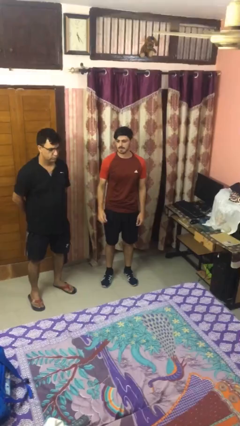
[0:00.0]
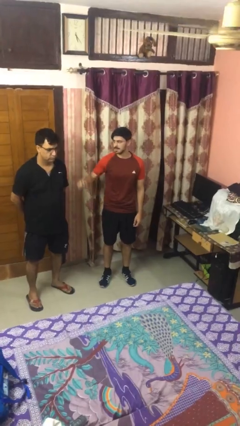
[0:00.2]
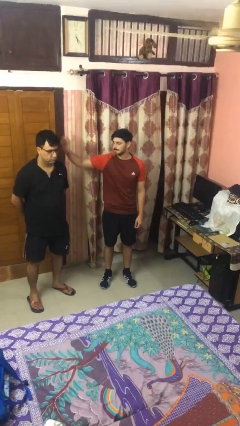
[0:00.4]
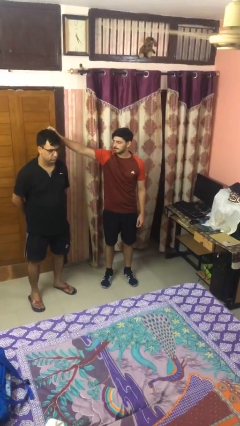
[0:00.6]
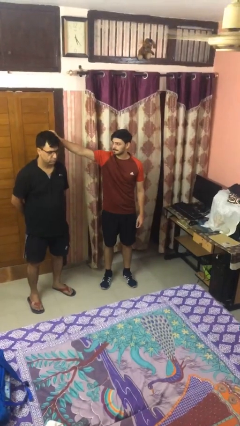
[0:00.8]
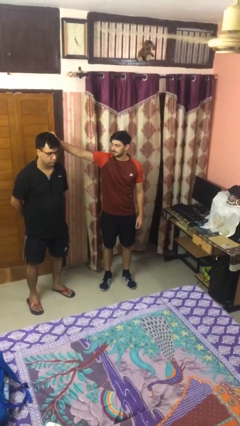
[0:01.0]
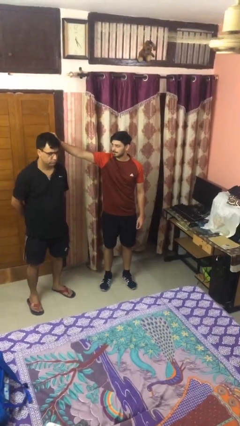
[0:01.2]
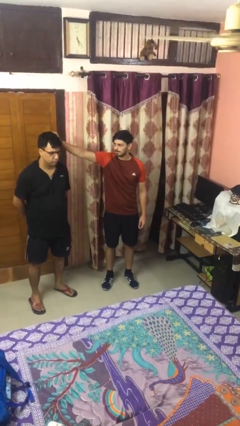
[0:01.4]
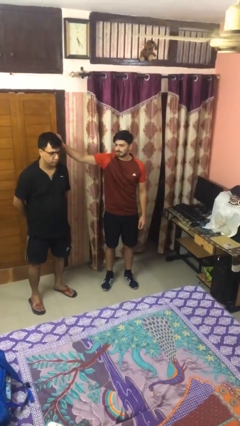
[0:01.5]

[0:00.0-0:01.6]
person grabs person by hair

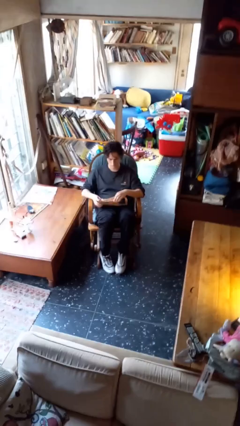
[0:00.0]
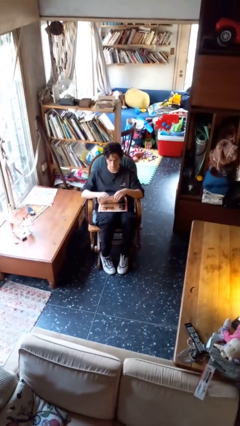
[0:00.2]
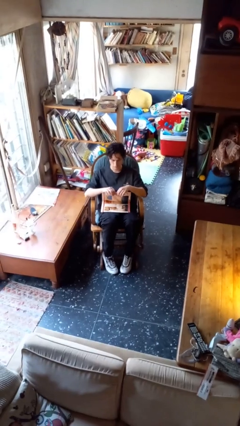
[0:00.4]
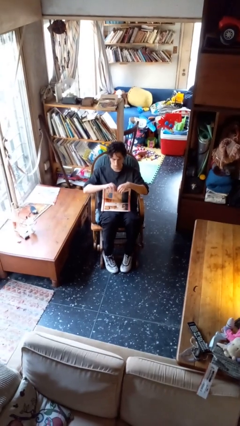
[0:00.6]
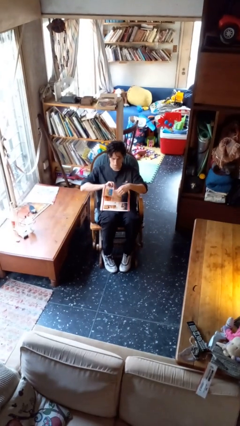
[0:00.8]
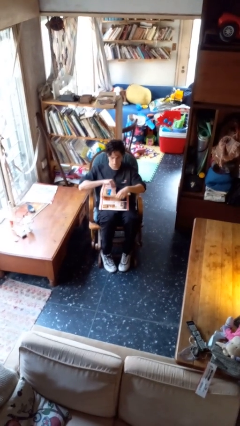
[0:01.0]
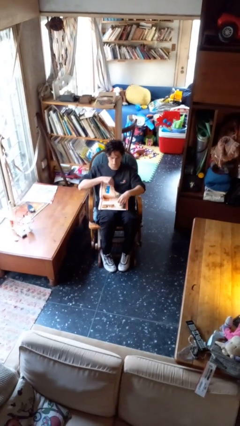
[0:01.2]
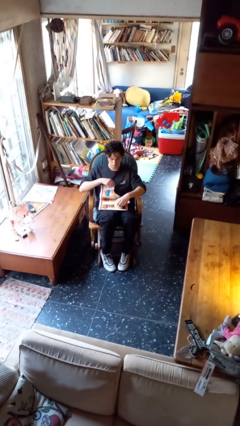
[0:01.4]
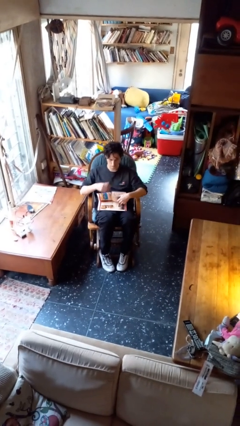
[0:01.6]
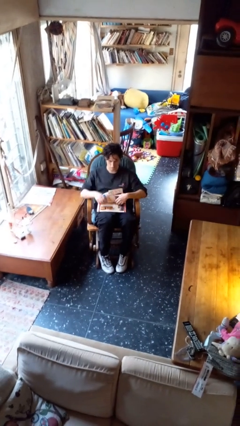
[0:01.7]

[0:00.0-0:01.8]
person tears paper

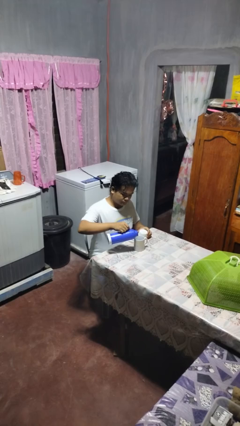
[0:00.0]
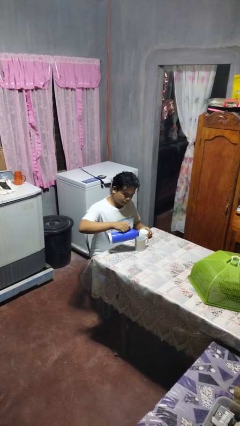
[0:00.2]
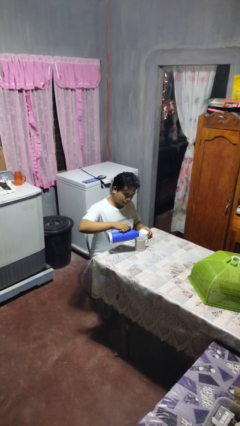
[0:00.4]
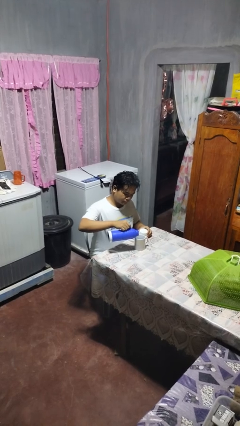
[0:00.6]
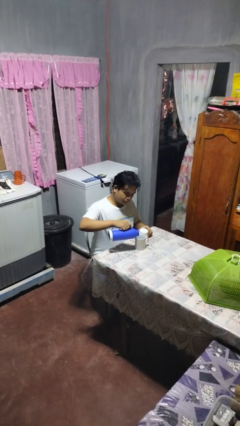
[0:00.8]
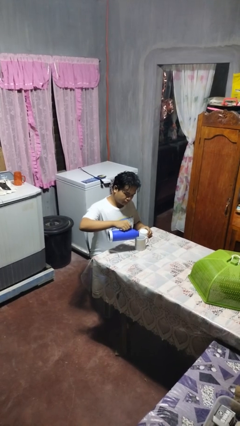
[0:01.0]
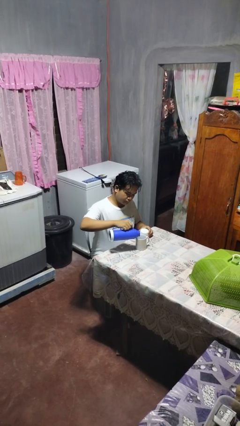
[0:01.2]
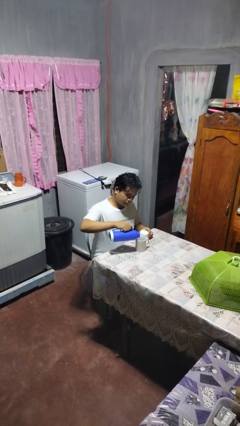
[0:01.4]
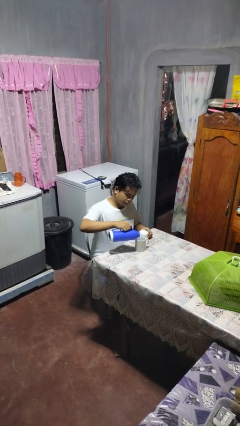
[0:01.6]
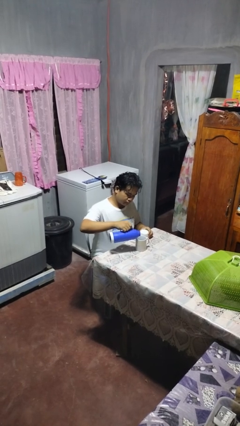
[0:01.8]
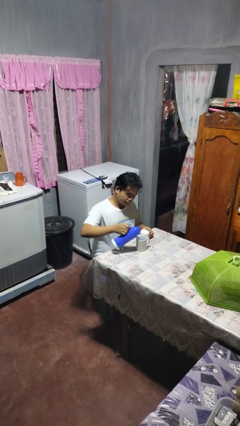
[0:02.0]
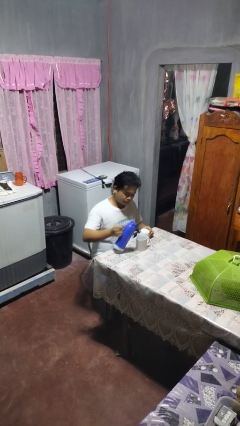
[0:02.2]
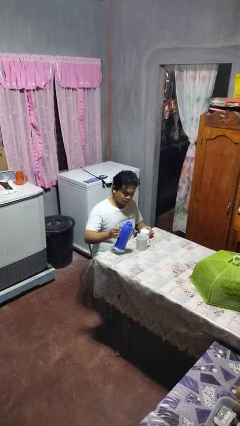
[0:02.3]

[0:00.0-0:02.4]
person pours coffee into mug

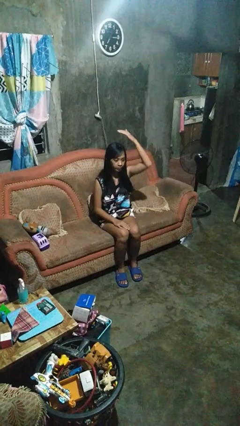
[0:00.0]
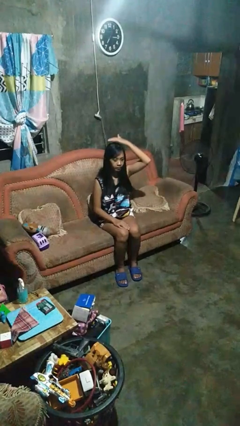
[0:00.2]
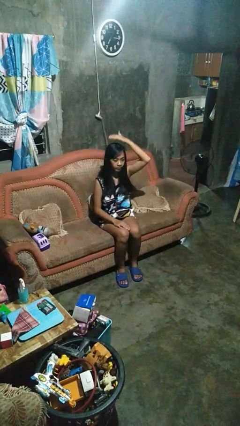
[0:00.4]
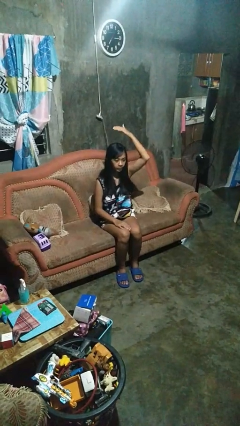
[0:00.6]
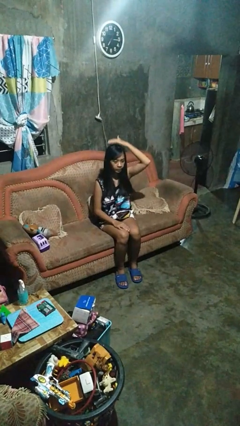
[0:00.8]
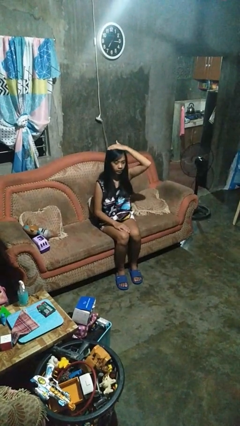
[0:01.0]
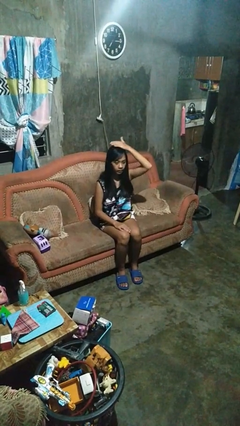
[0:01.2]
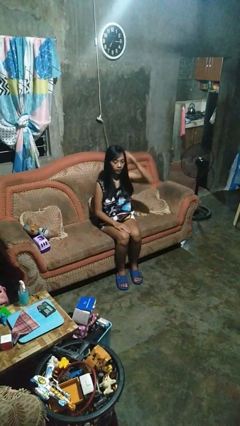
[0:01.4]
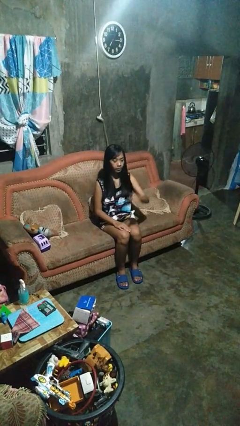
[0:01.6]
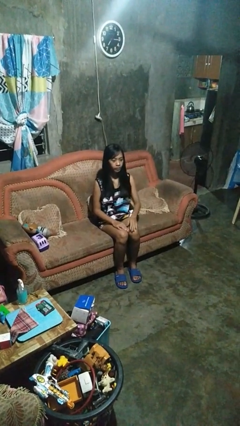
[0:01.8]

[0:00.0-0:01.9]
person pats head

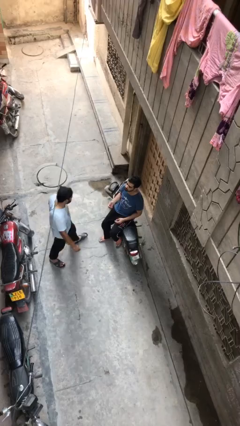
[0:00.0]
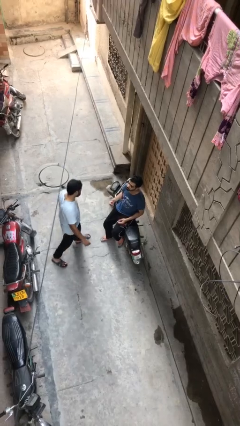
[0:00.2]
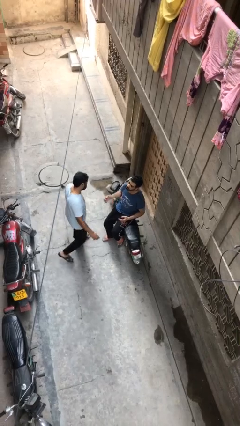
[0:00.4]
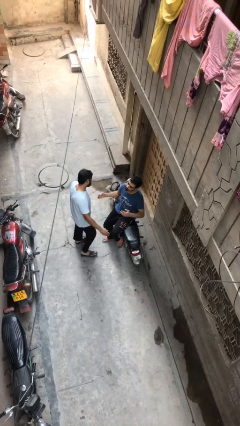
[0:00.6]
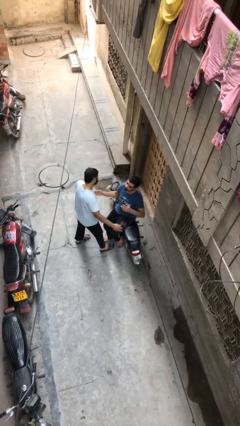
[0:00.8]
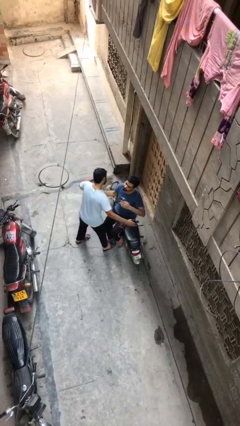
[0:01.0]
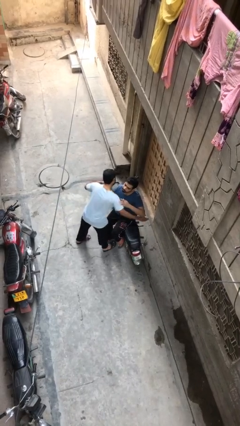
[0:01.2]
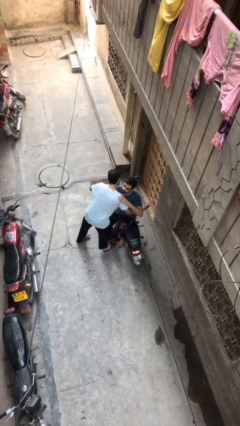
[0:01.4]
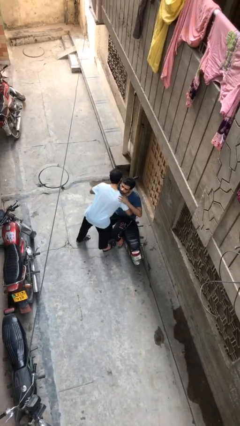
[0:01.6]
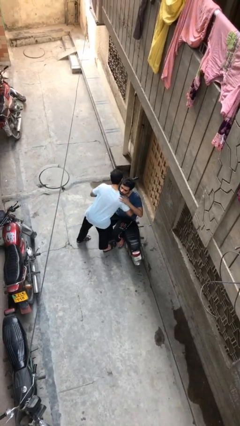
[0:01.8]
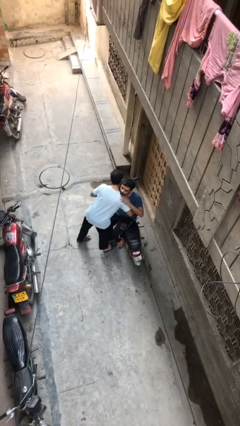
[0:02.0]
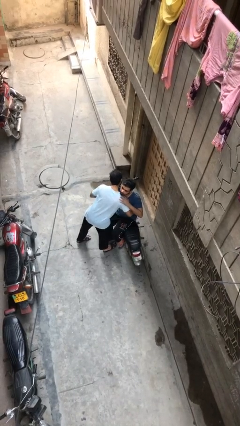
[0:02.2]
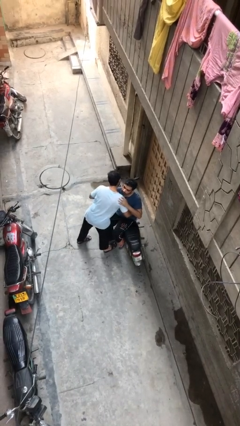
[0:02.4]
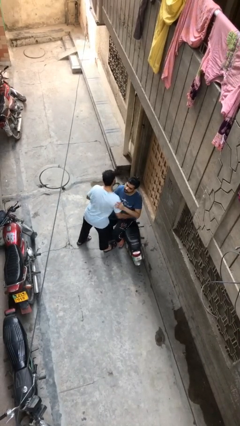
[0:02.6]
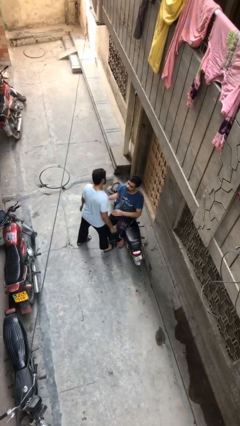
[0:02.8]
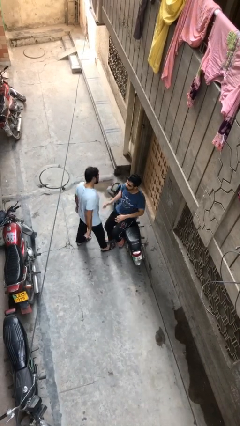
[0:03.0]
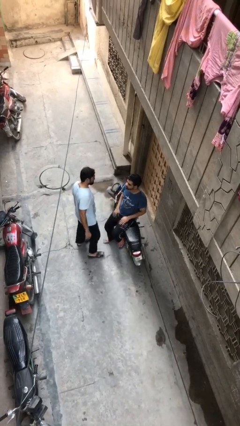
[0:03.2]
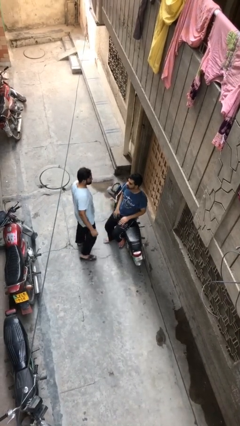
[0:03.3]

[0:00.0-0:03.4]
person embraces person

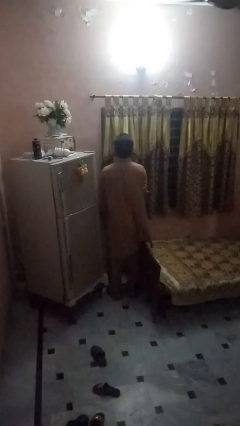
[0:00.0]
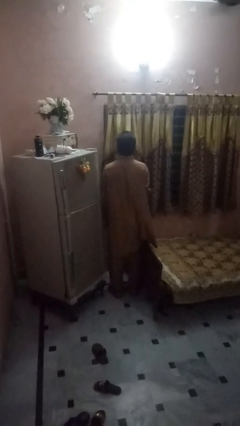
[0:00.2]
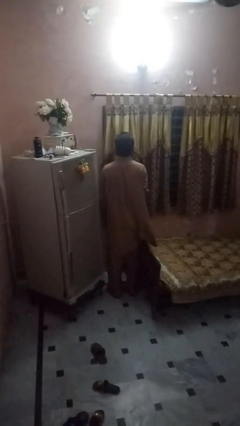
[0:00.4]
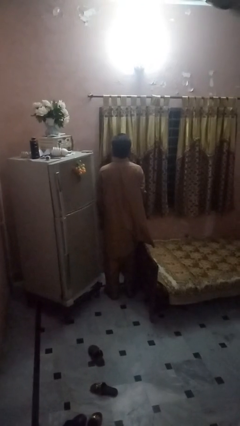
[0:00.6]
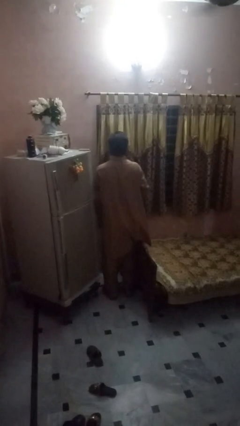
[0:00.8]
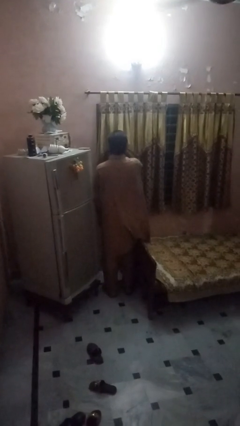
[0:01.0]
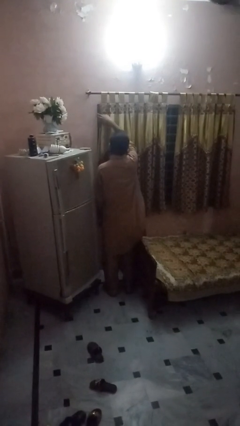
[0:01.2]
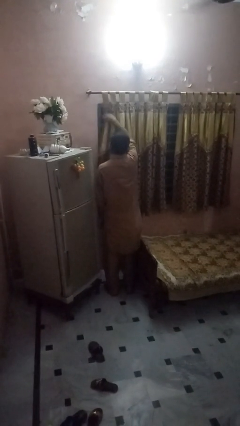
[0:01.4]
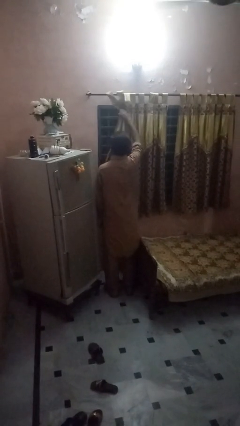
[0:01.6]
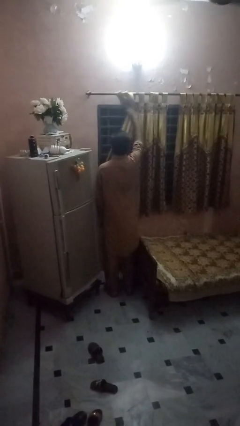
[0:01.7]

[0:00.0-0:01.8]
person opens curtains

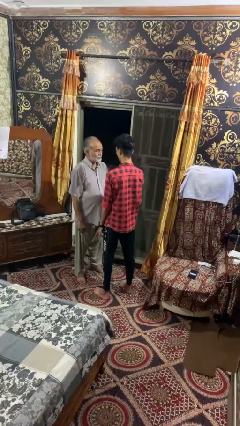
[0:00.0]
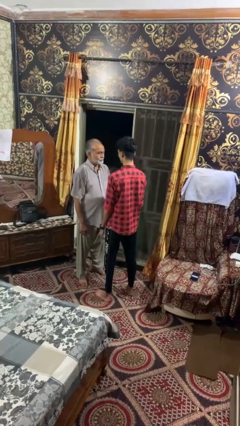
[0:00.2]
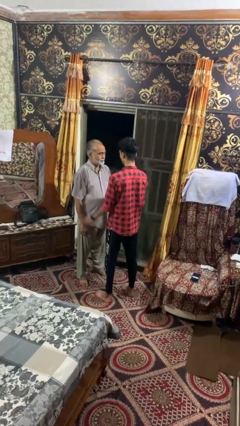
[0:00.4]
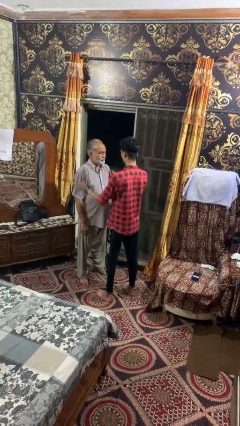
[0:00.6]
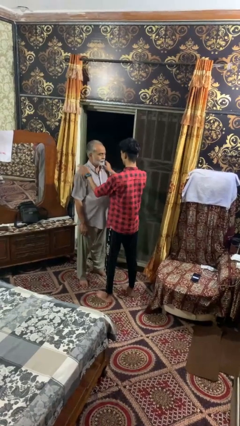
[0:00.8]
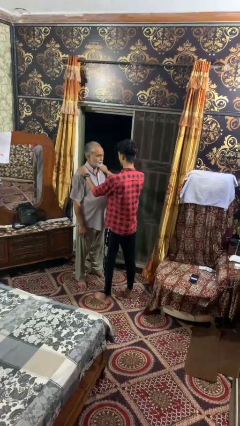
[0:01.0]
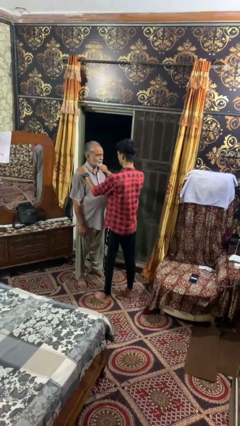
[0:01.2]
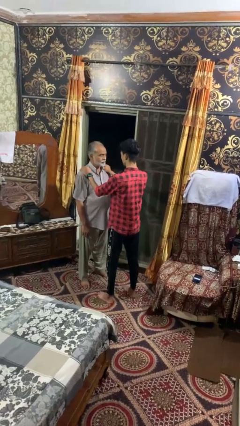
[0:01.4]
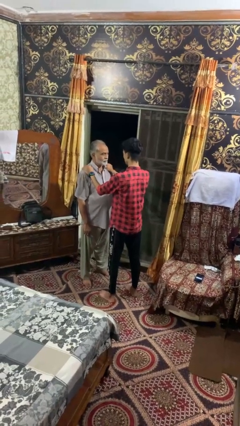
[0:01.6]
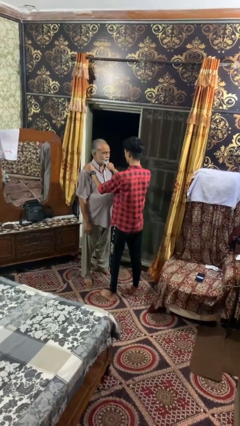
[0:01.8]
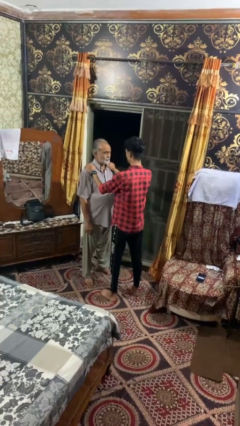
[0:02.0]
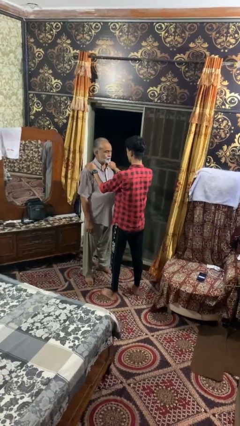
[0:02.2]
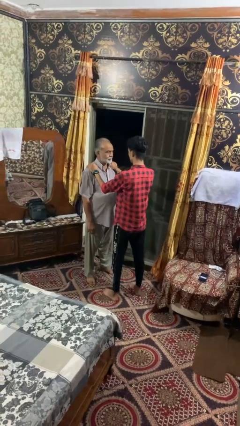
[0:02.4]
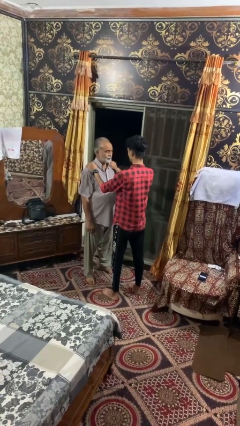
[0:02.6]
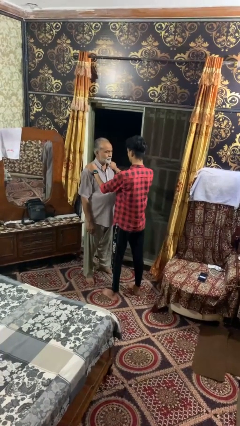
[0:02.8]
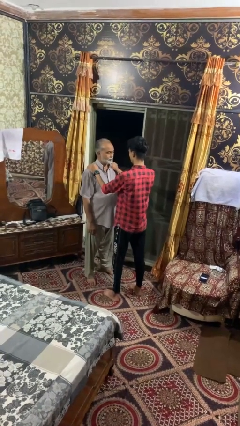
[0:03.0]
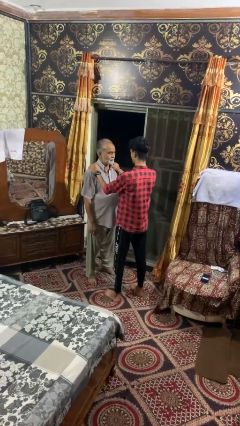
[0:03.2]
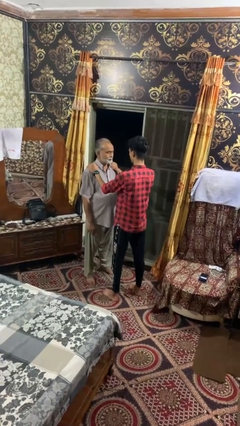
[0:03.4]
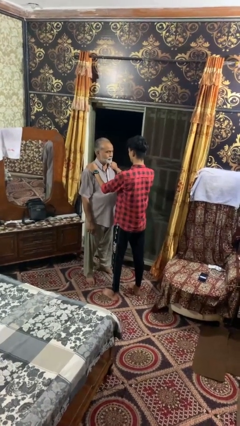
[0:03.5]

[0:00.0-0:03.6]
person pounds shoulders of person

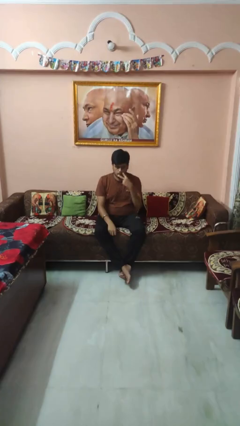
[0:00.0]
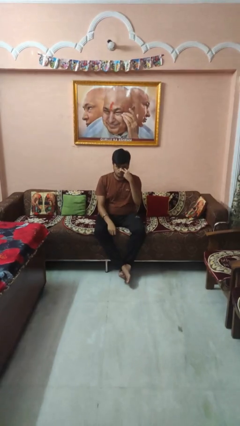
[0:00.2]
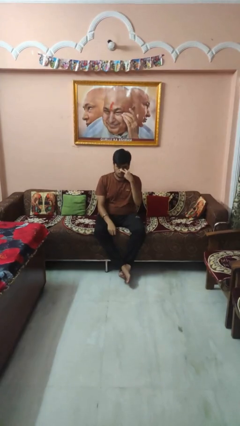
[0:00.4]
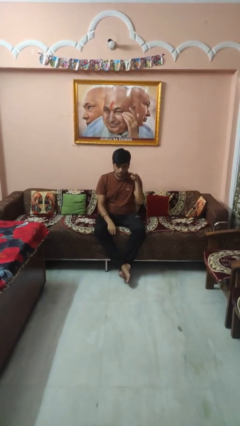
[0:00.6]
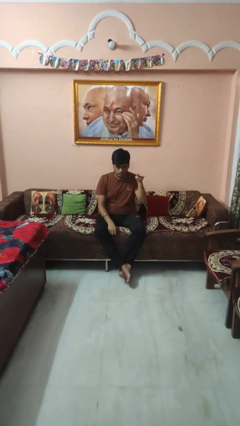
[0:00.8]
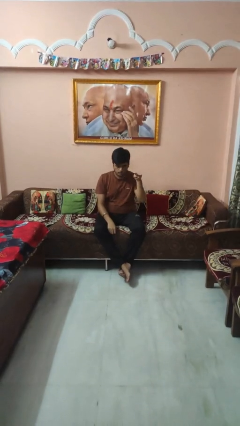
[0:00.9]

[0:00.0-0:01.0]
person gestures watch closely
